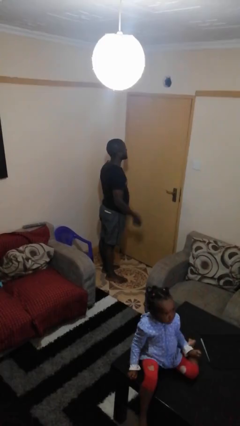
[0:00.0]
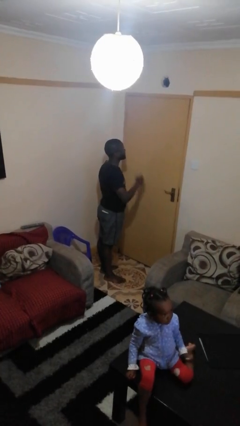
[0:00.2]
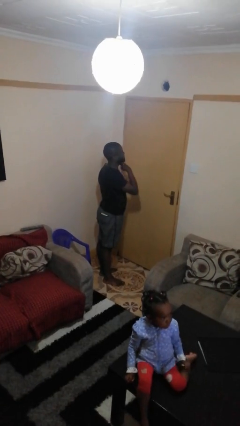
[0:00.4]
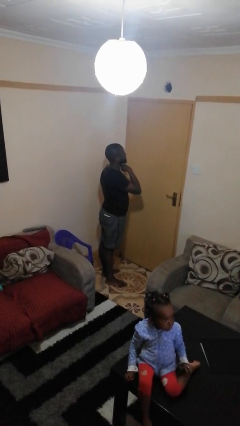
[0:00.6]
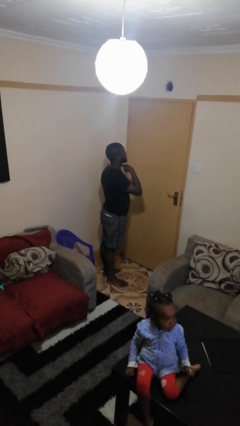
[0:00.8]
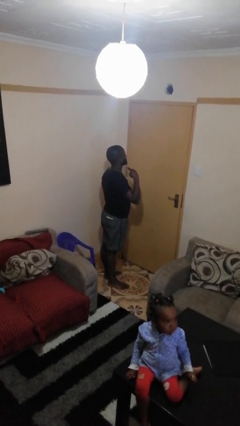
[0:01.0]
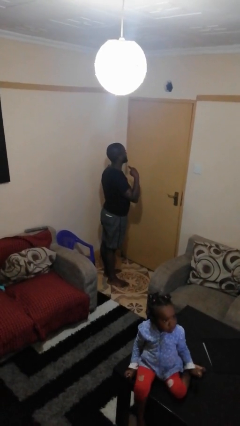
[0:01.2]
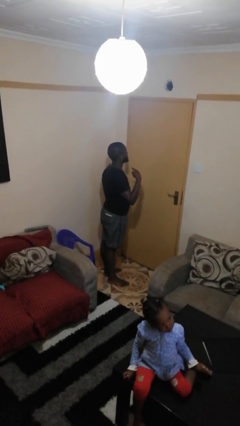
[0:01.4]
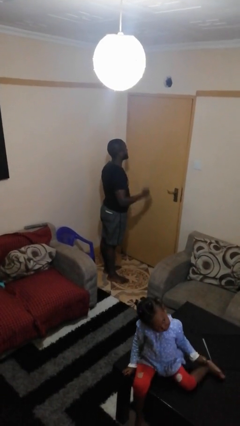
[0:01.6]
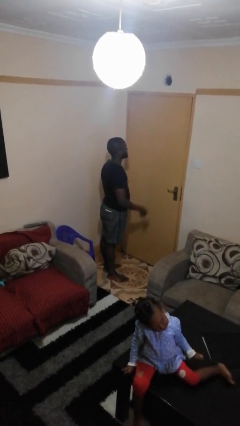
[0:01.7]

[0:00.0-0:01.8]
person gestures cut

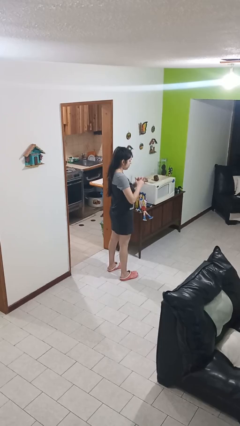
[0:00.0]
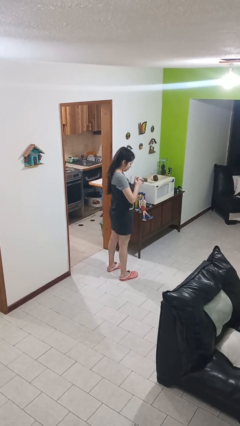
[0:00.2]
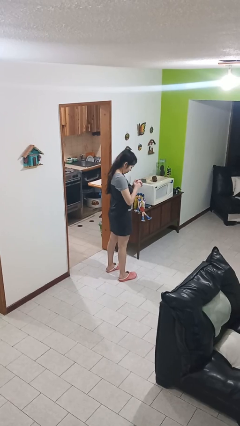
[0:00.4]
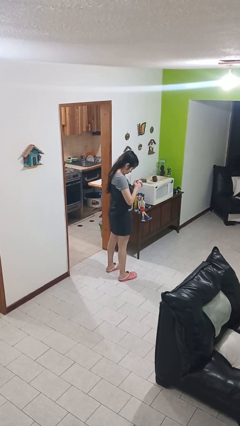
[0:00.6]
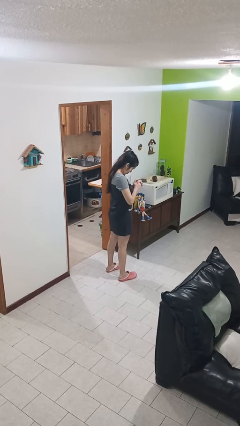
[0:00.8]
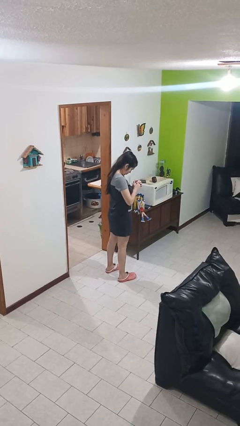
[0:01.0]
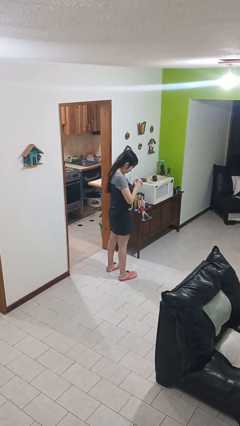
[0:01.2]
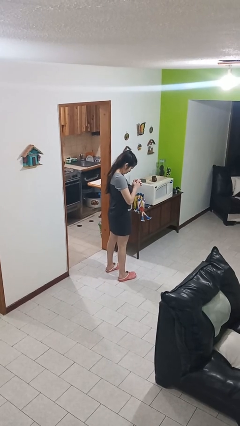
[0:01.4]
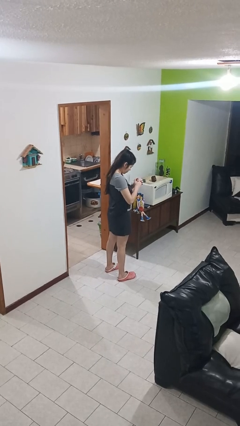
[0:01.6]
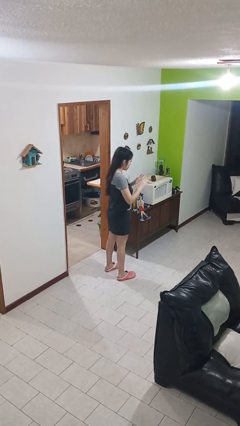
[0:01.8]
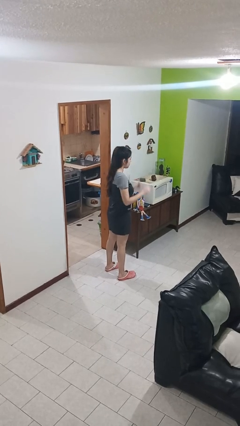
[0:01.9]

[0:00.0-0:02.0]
person prays

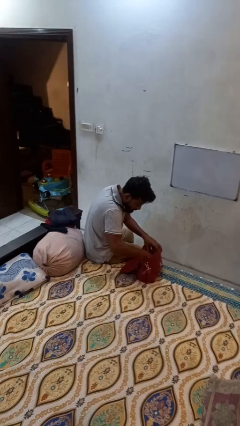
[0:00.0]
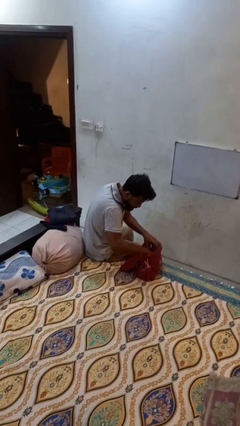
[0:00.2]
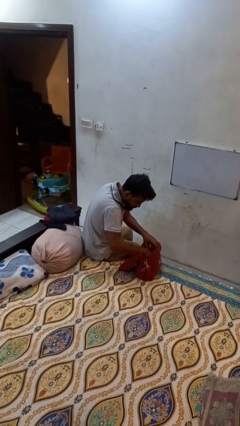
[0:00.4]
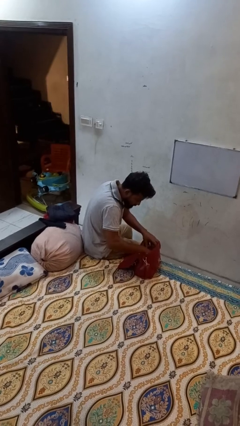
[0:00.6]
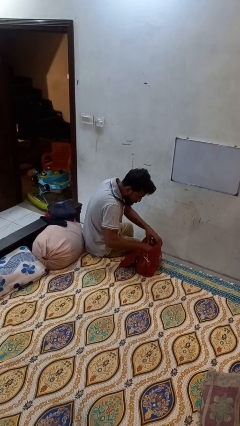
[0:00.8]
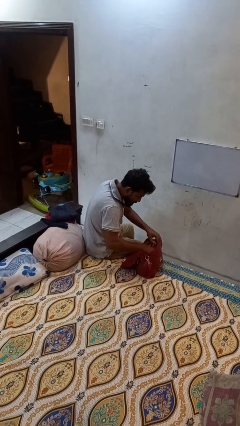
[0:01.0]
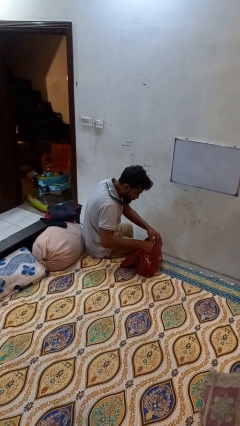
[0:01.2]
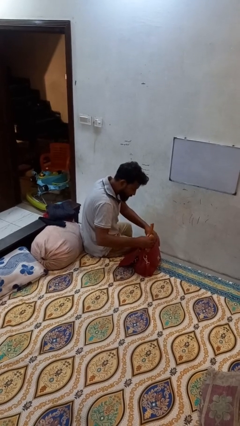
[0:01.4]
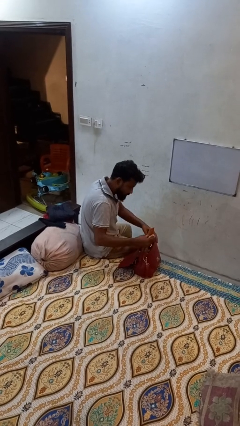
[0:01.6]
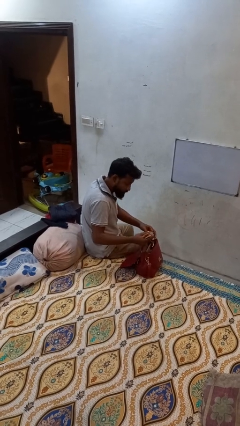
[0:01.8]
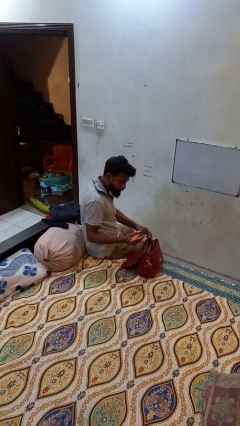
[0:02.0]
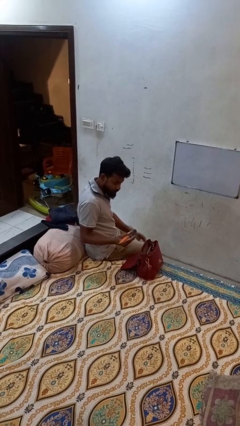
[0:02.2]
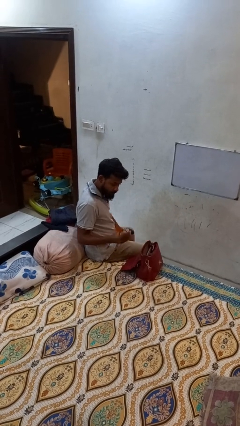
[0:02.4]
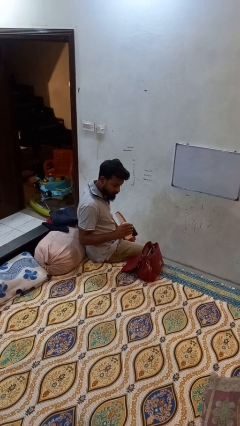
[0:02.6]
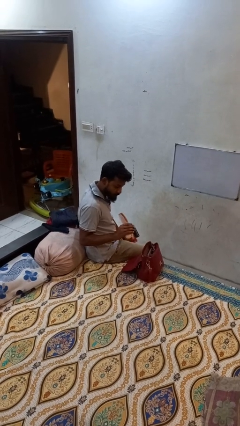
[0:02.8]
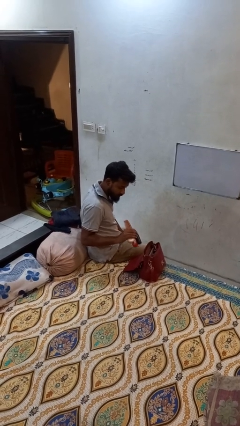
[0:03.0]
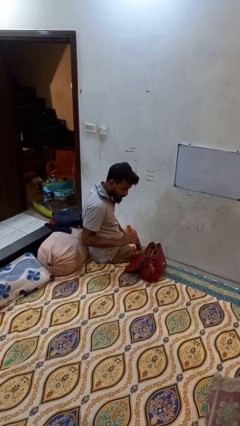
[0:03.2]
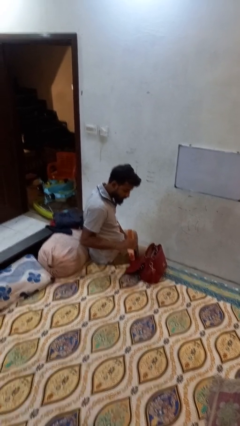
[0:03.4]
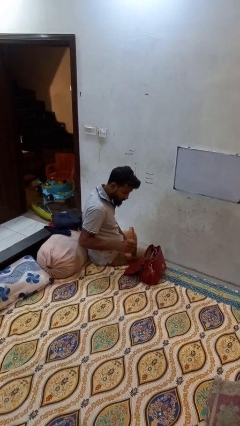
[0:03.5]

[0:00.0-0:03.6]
person takes object from purse

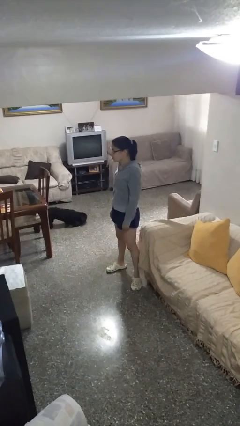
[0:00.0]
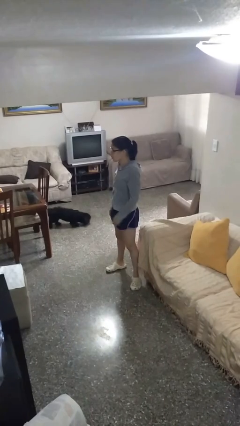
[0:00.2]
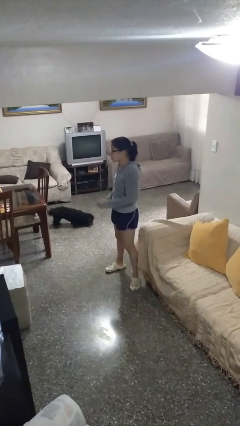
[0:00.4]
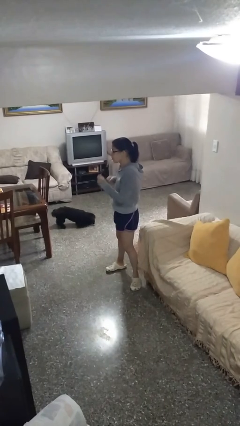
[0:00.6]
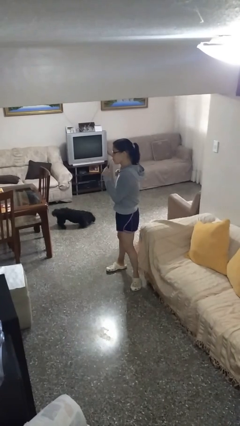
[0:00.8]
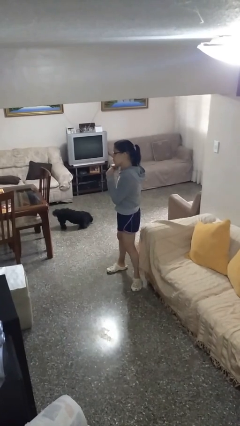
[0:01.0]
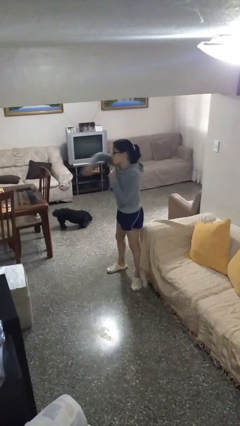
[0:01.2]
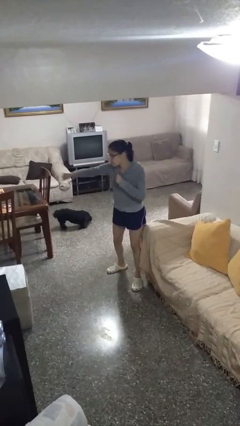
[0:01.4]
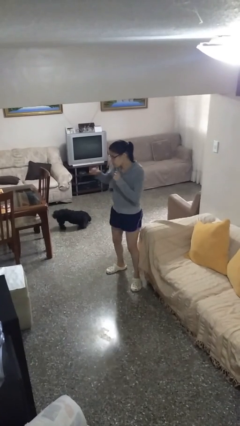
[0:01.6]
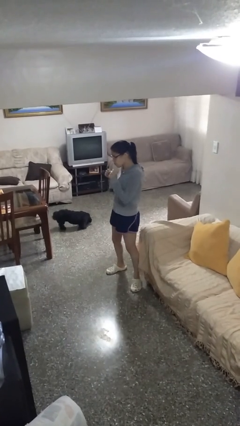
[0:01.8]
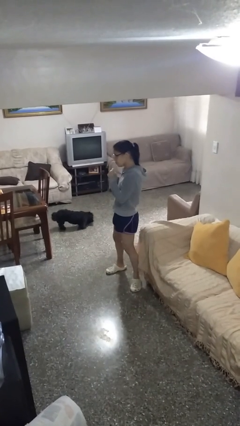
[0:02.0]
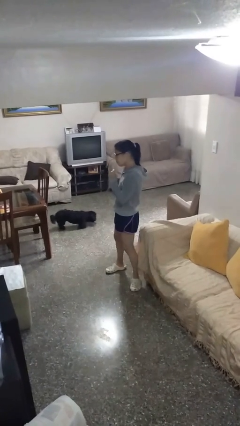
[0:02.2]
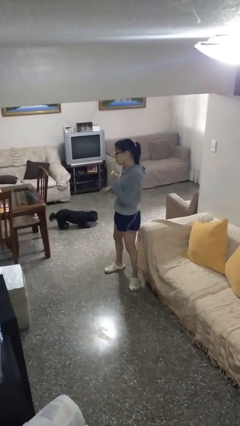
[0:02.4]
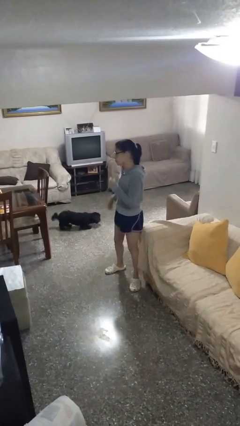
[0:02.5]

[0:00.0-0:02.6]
person punches

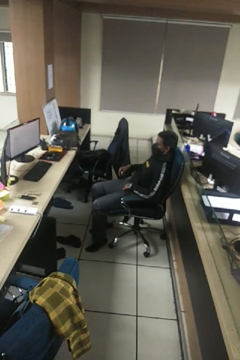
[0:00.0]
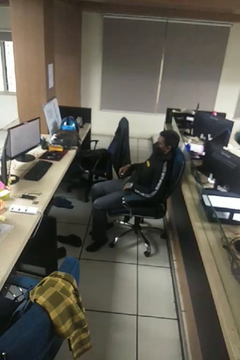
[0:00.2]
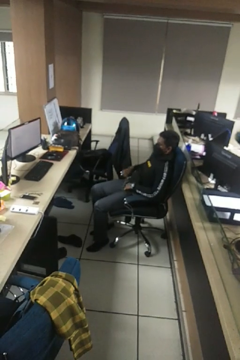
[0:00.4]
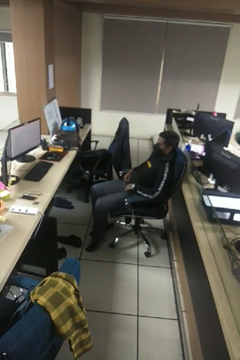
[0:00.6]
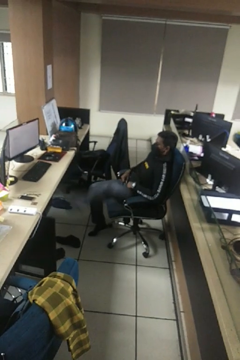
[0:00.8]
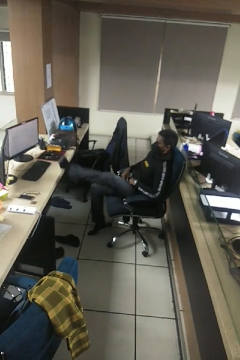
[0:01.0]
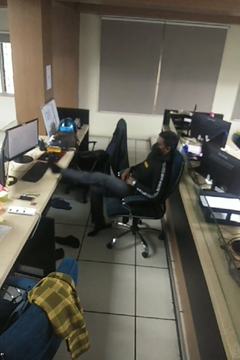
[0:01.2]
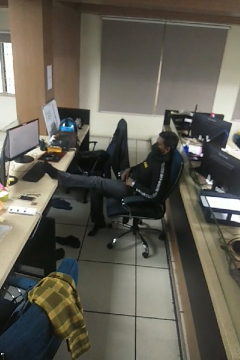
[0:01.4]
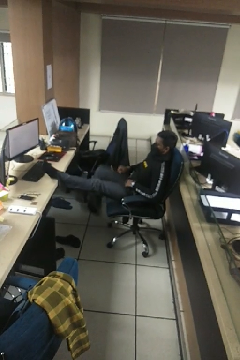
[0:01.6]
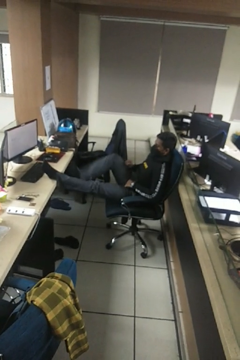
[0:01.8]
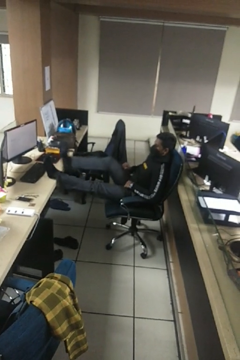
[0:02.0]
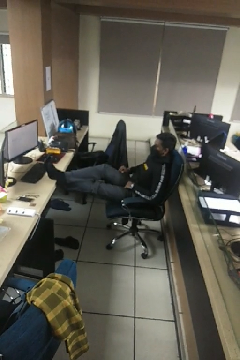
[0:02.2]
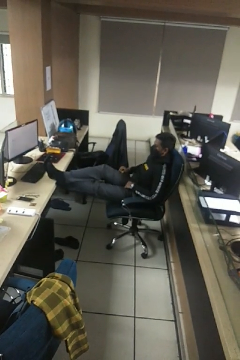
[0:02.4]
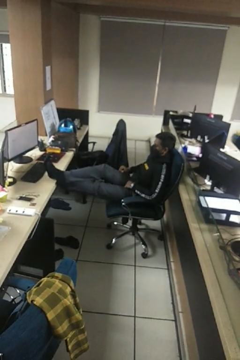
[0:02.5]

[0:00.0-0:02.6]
person puts feet up

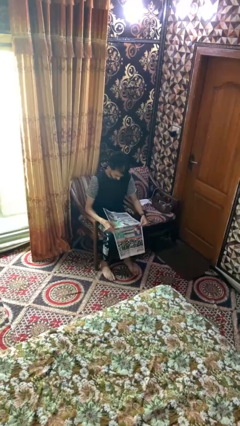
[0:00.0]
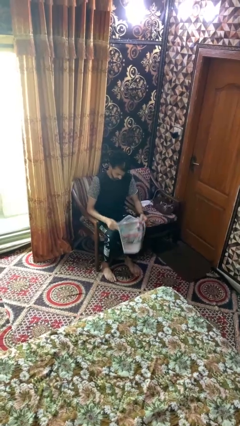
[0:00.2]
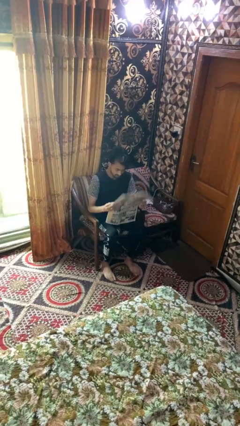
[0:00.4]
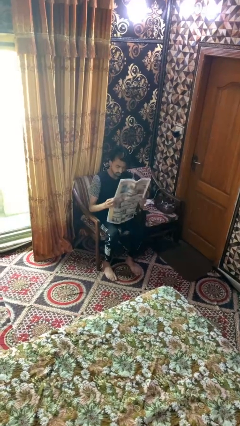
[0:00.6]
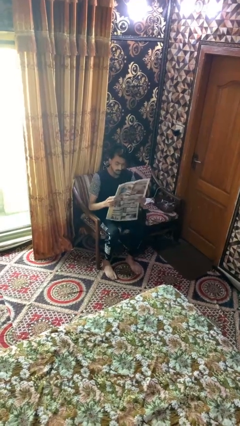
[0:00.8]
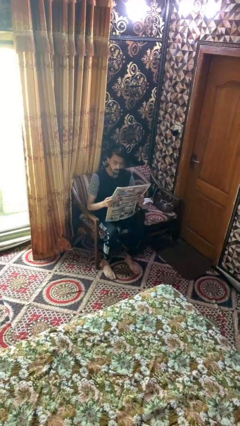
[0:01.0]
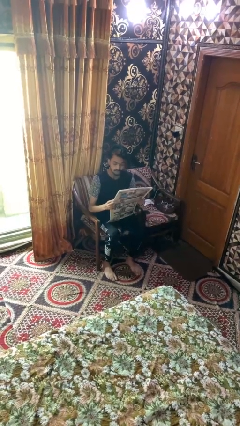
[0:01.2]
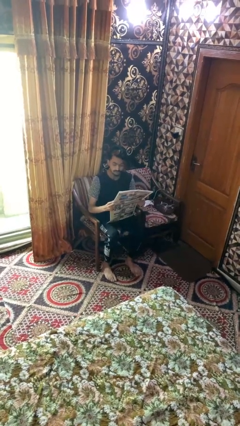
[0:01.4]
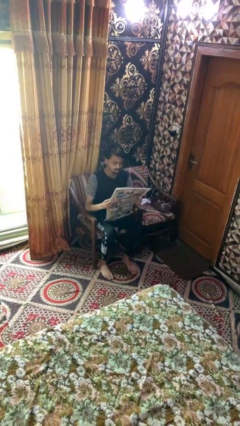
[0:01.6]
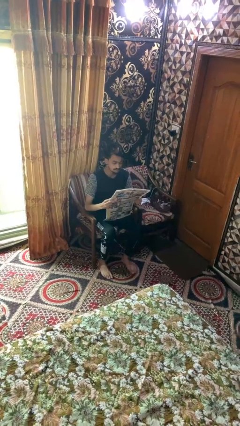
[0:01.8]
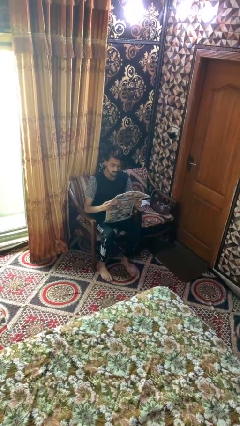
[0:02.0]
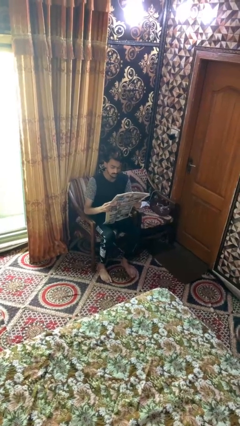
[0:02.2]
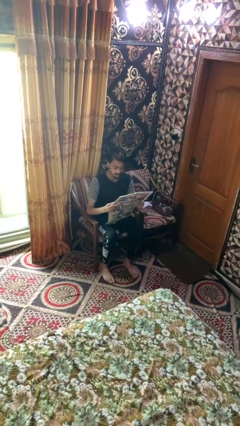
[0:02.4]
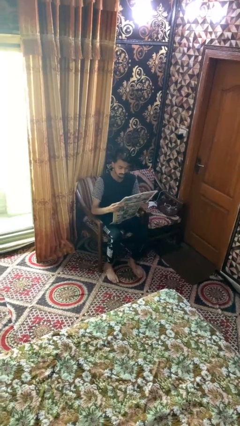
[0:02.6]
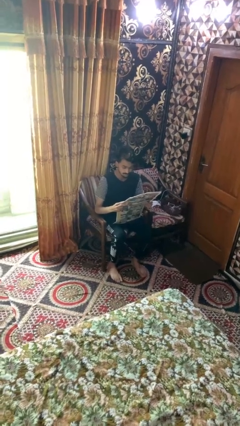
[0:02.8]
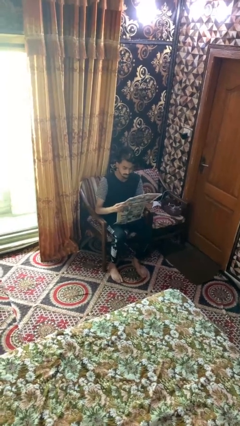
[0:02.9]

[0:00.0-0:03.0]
person reads newspaper

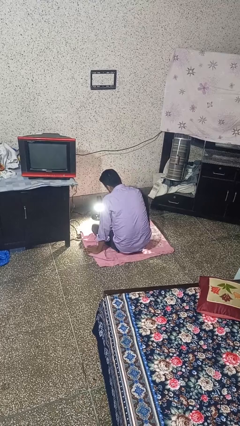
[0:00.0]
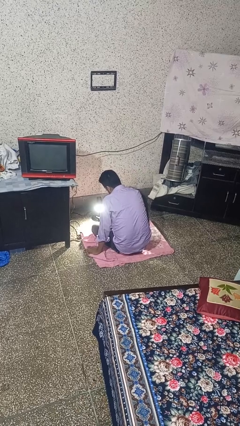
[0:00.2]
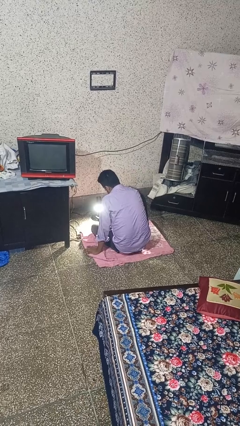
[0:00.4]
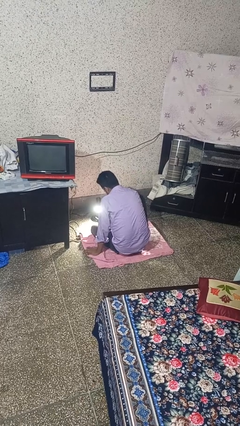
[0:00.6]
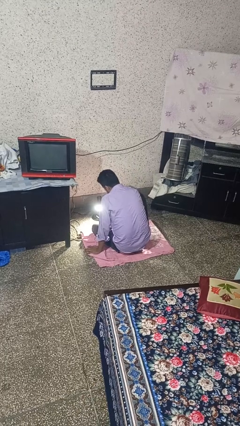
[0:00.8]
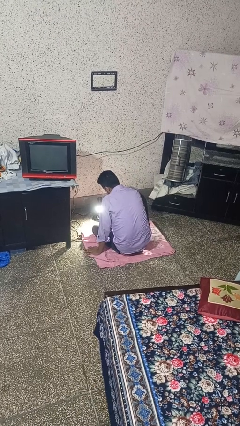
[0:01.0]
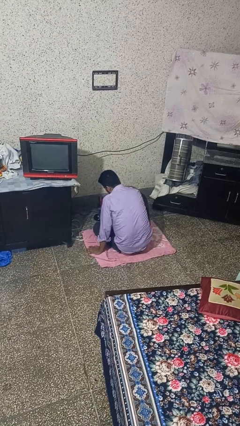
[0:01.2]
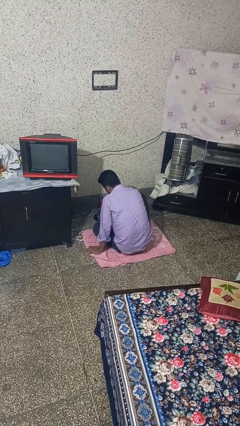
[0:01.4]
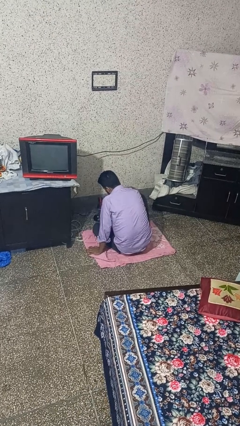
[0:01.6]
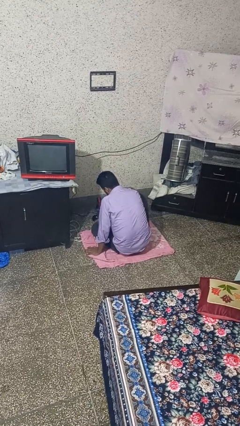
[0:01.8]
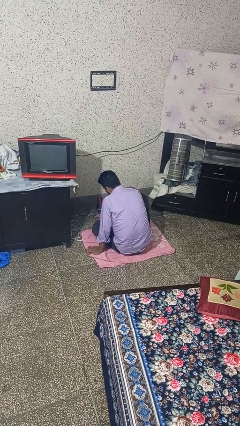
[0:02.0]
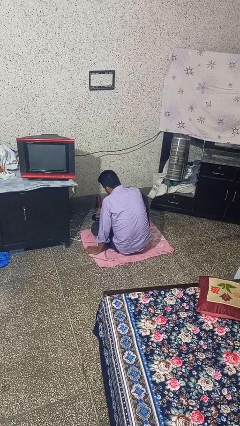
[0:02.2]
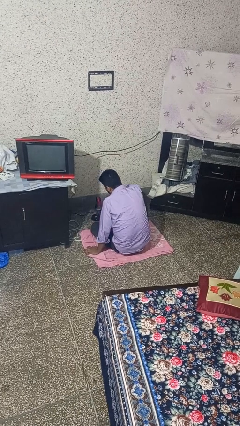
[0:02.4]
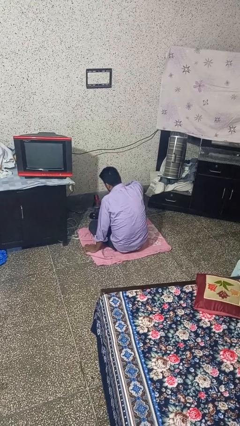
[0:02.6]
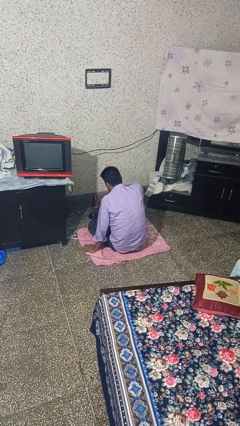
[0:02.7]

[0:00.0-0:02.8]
person turns off fan
